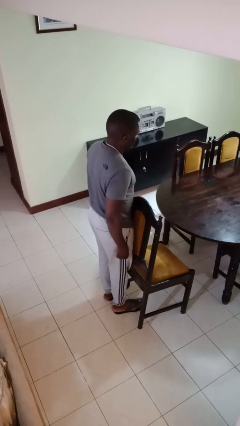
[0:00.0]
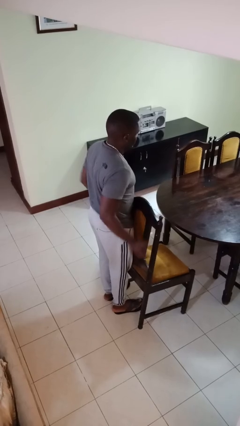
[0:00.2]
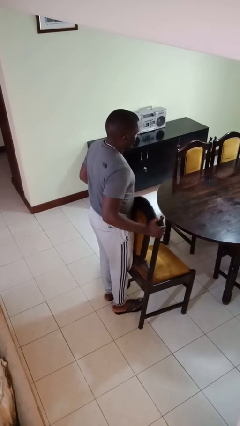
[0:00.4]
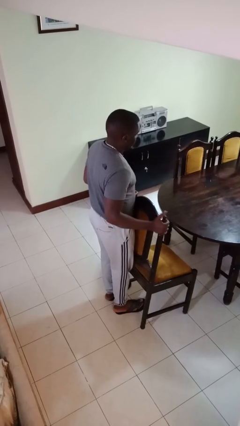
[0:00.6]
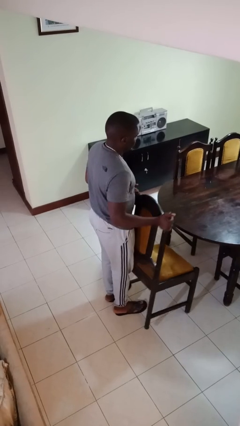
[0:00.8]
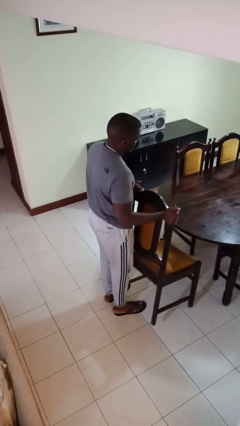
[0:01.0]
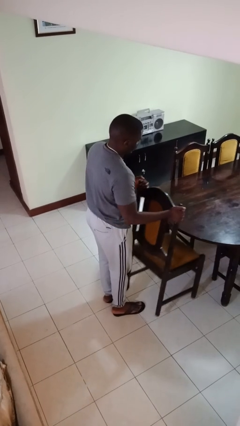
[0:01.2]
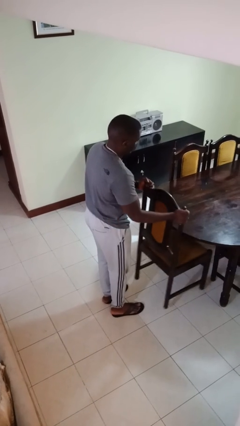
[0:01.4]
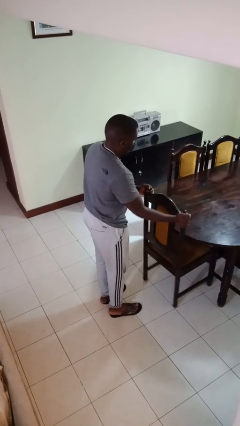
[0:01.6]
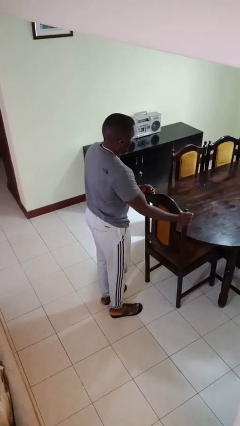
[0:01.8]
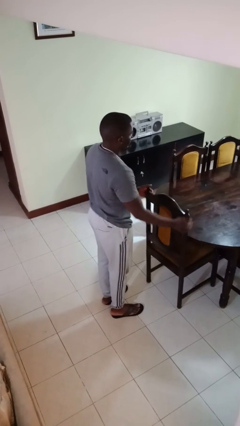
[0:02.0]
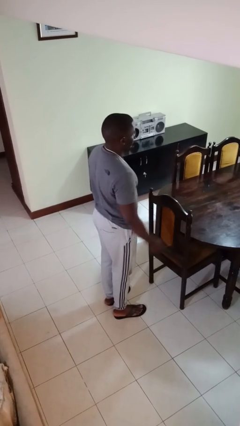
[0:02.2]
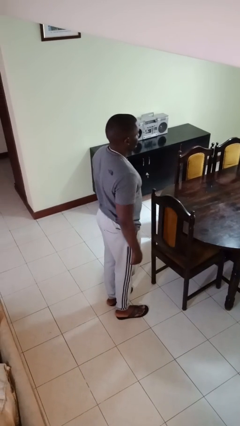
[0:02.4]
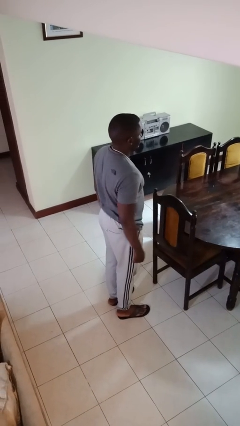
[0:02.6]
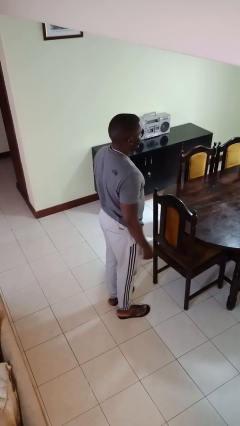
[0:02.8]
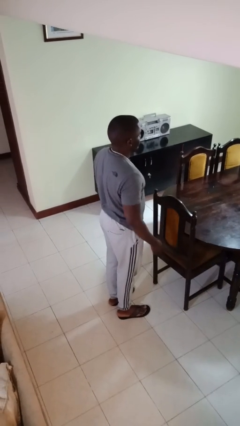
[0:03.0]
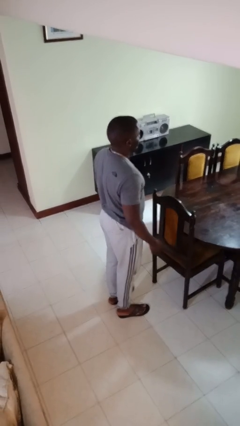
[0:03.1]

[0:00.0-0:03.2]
person pushes in chair

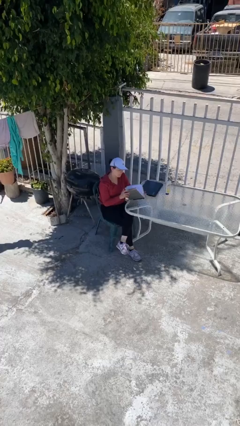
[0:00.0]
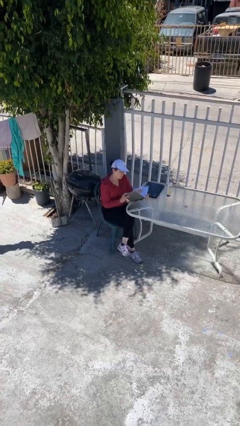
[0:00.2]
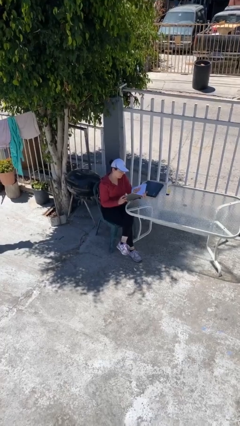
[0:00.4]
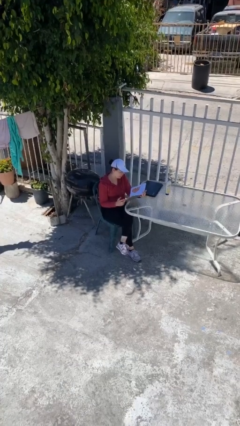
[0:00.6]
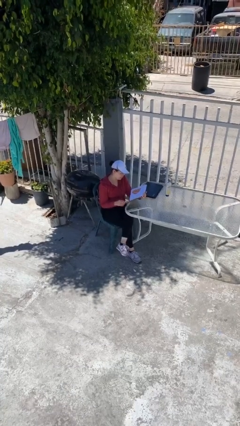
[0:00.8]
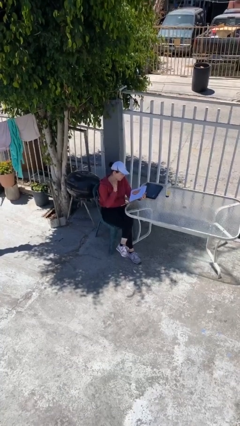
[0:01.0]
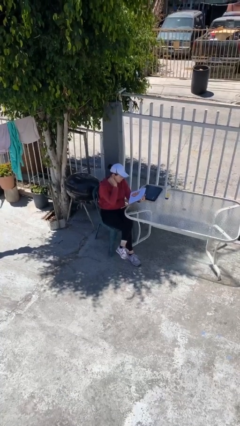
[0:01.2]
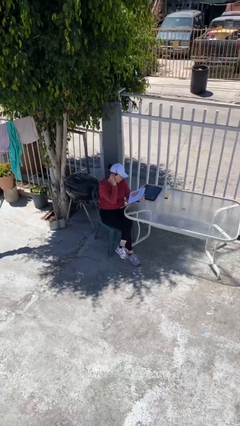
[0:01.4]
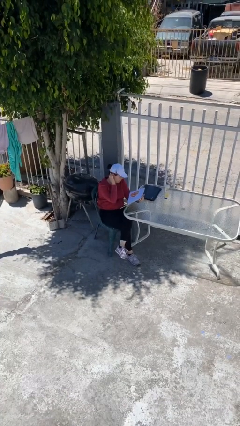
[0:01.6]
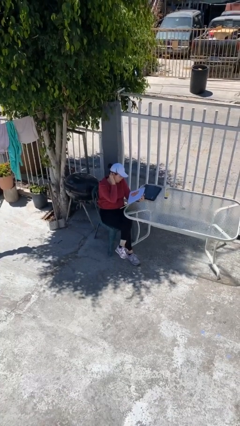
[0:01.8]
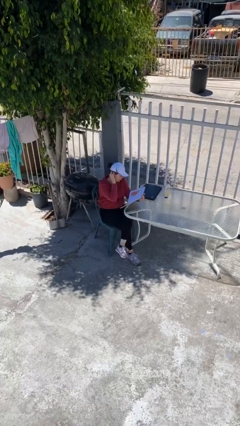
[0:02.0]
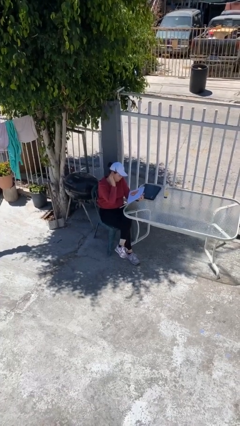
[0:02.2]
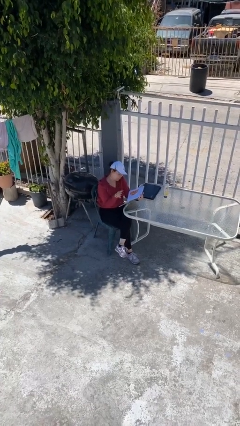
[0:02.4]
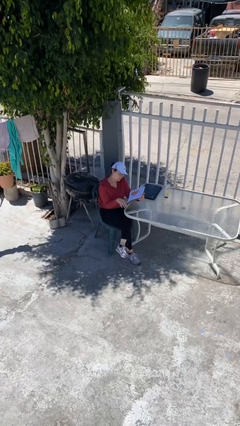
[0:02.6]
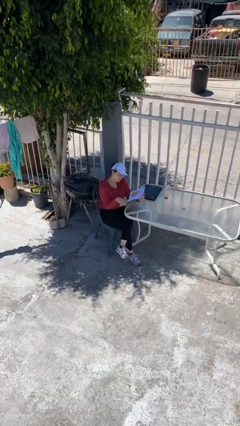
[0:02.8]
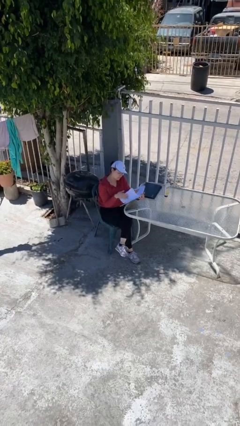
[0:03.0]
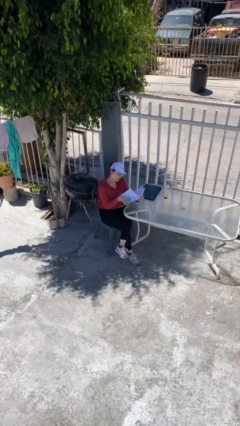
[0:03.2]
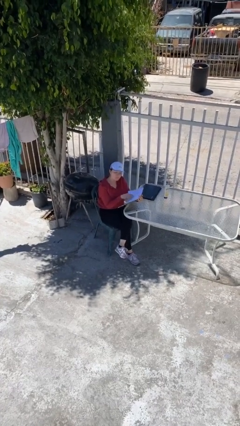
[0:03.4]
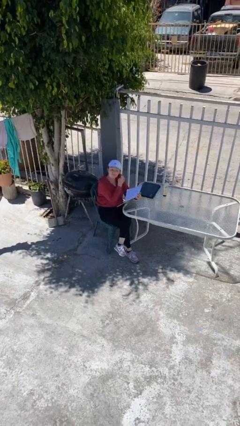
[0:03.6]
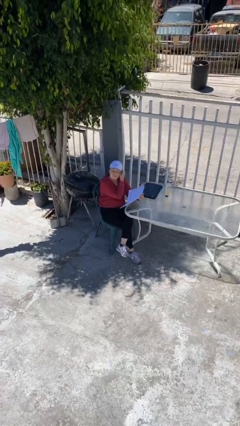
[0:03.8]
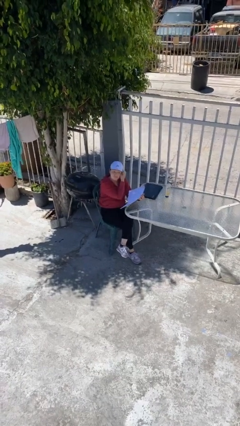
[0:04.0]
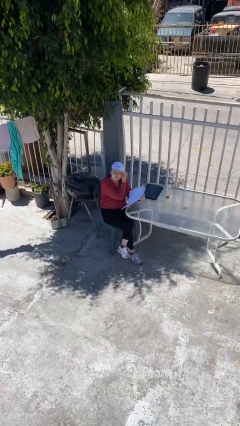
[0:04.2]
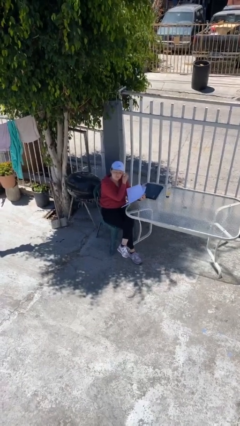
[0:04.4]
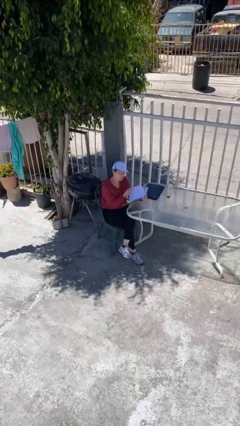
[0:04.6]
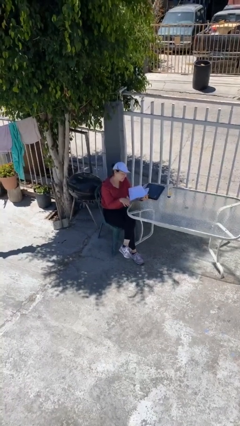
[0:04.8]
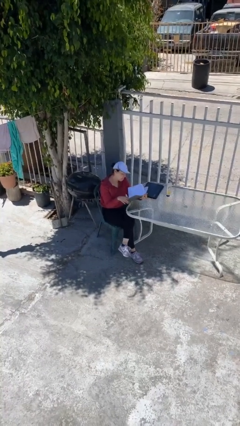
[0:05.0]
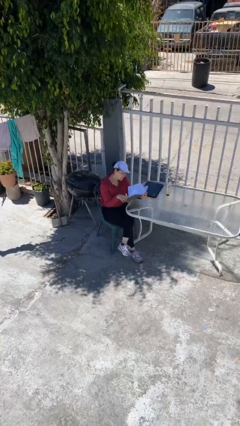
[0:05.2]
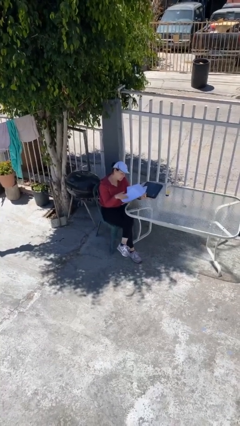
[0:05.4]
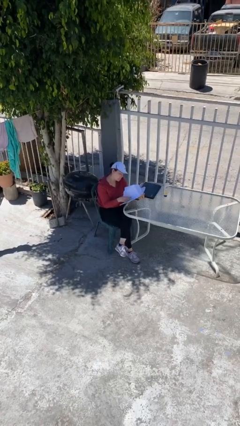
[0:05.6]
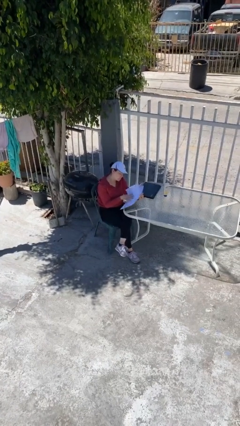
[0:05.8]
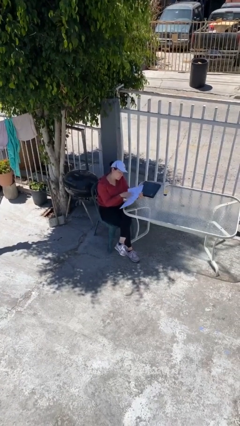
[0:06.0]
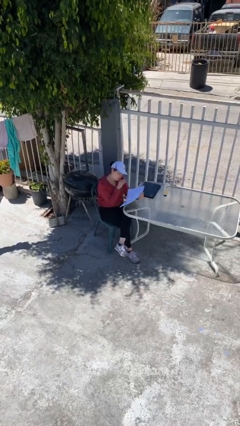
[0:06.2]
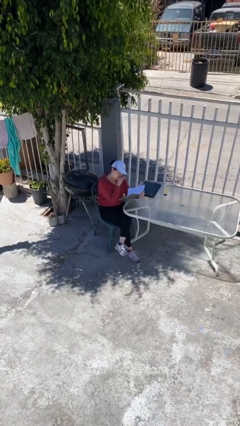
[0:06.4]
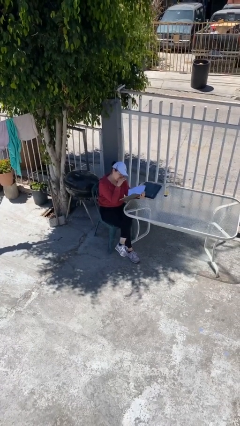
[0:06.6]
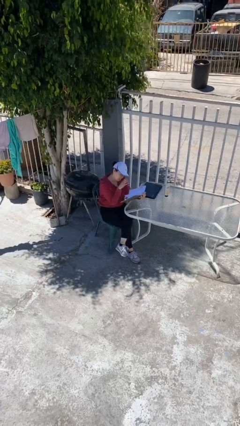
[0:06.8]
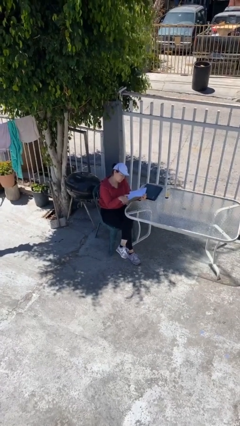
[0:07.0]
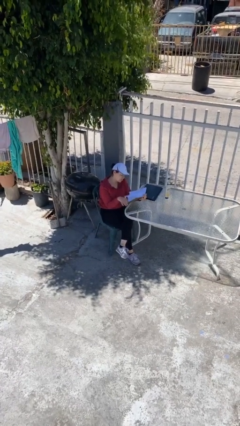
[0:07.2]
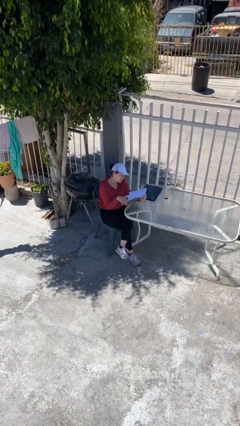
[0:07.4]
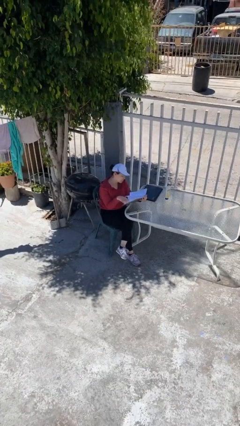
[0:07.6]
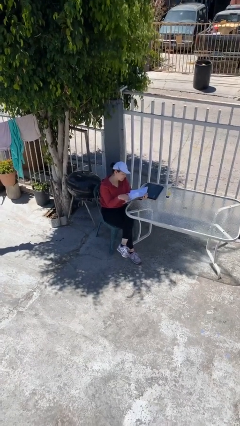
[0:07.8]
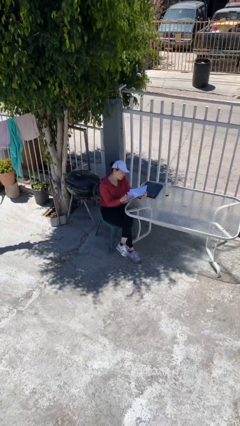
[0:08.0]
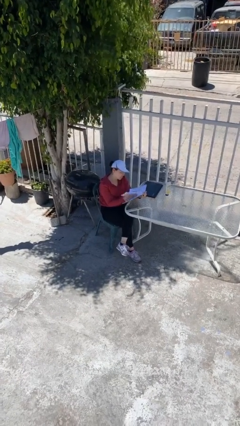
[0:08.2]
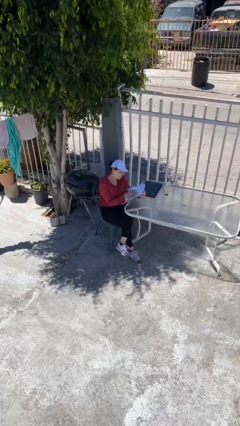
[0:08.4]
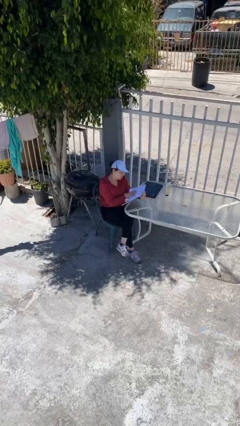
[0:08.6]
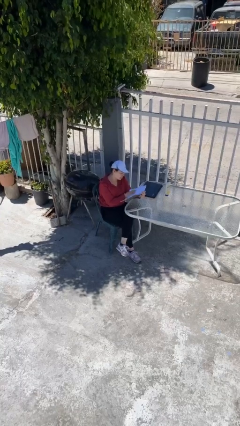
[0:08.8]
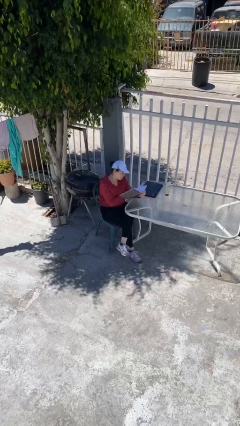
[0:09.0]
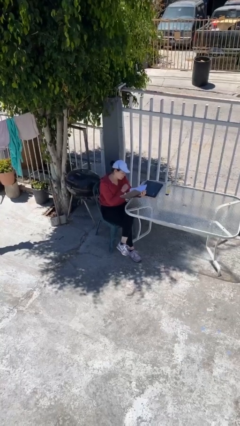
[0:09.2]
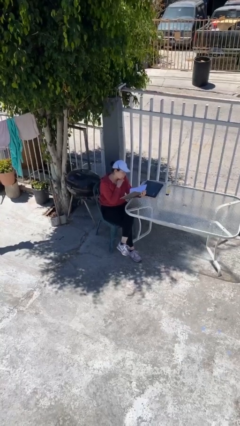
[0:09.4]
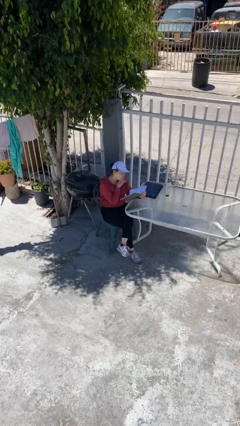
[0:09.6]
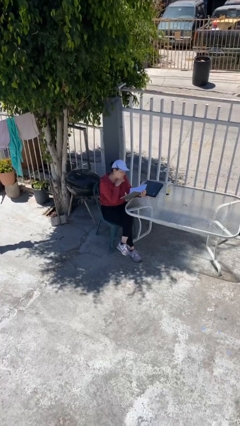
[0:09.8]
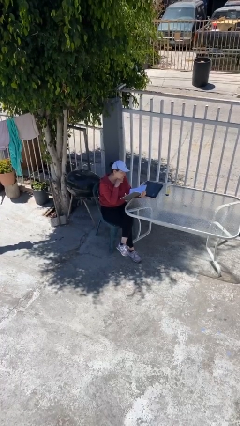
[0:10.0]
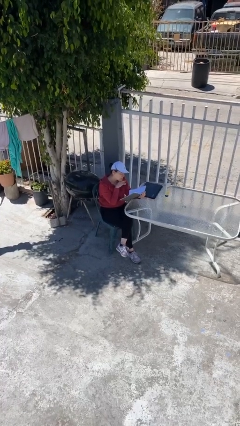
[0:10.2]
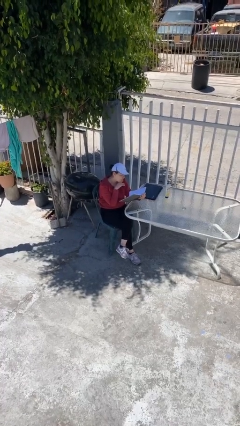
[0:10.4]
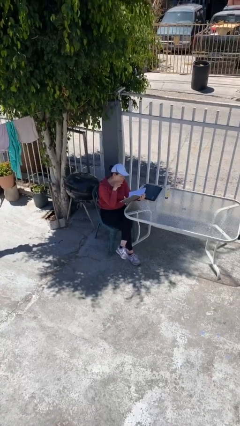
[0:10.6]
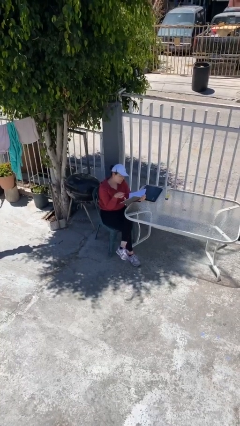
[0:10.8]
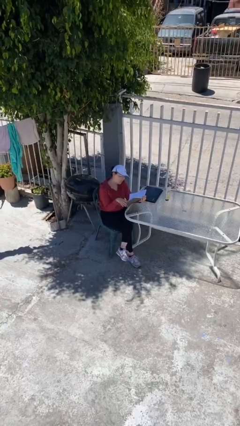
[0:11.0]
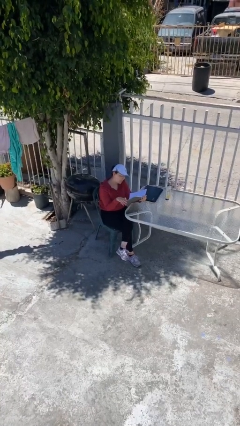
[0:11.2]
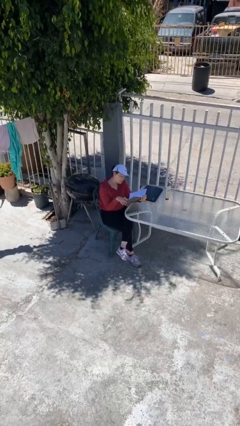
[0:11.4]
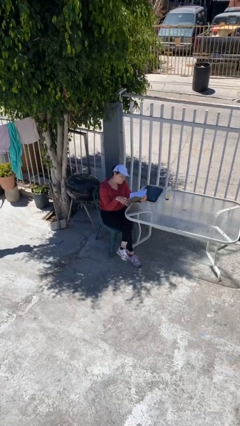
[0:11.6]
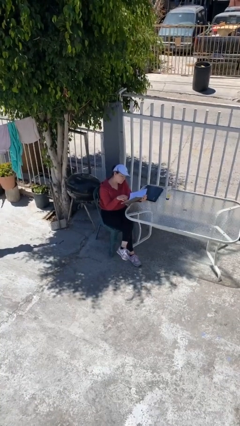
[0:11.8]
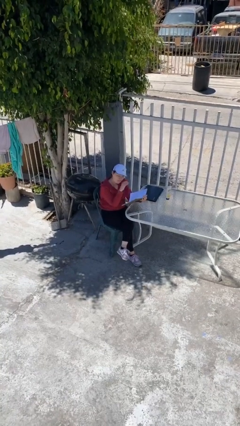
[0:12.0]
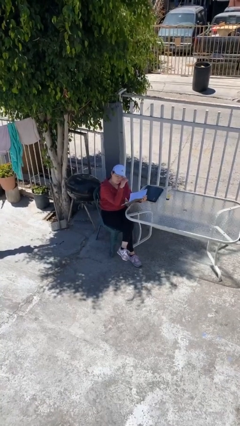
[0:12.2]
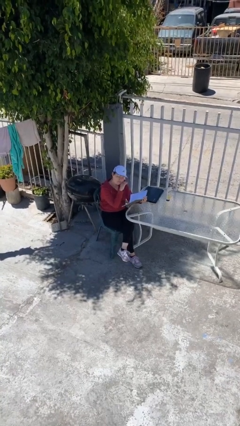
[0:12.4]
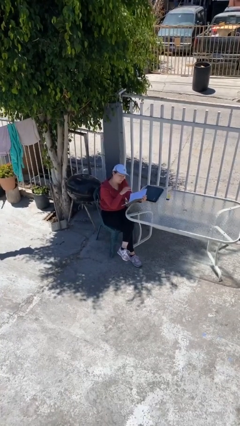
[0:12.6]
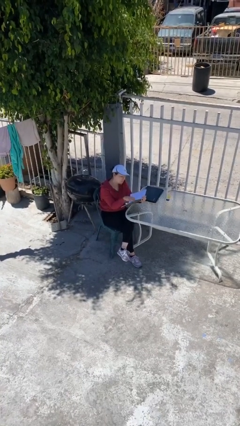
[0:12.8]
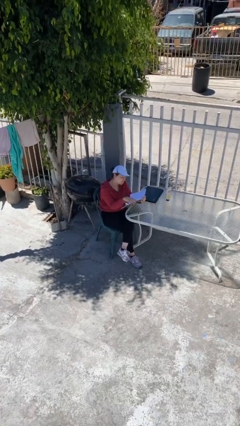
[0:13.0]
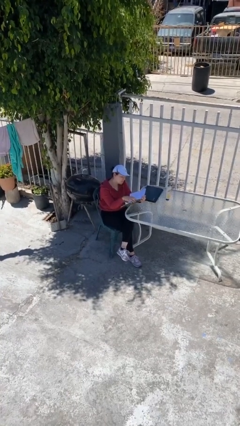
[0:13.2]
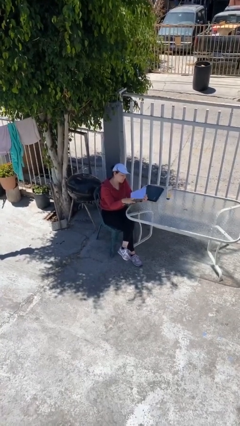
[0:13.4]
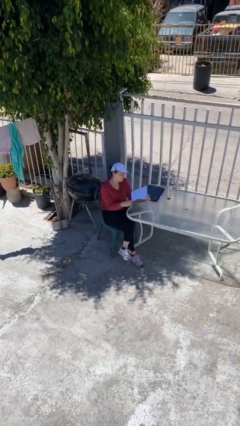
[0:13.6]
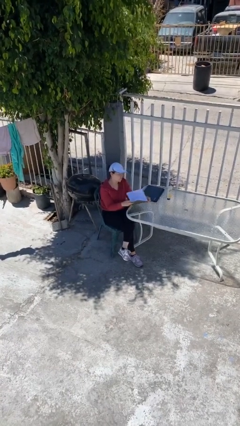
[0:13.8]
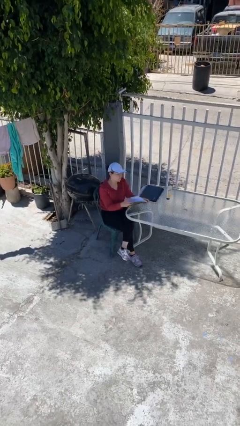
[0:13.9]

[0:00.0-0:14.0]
person reads document

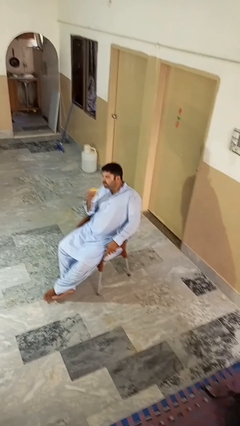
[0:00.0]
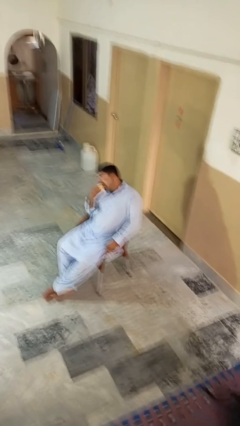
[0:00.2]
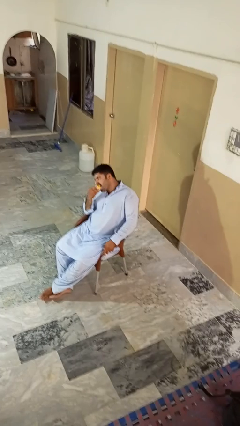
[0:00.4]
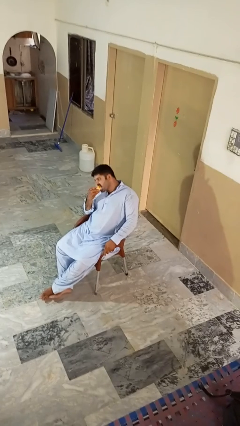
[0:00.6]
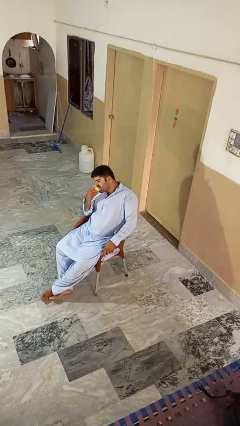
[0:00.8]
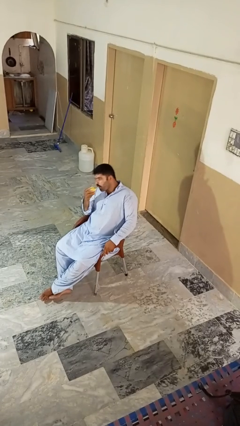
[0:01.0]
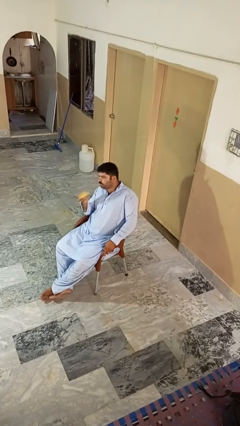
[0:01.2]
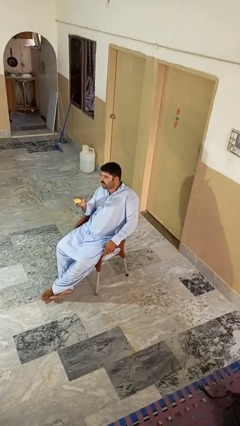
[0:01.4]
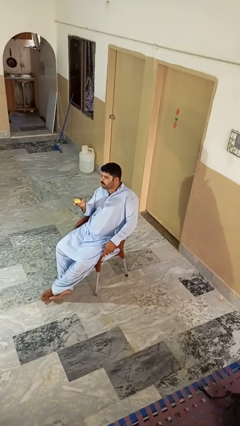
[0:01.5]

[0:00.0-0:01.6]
person eats apple
